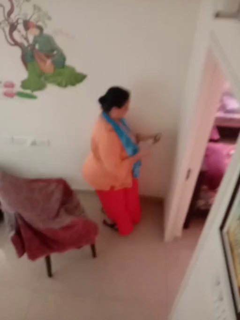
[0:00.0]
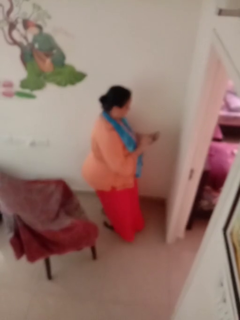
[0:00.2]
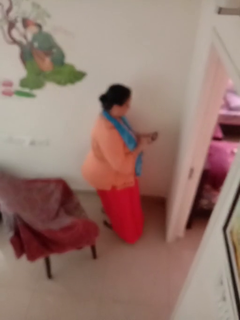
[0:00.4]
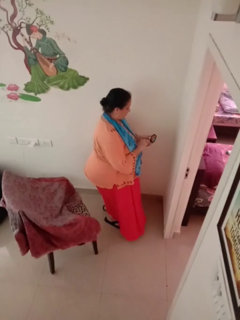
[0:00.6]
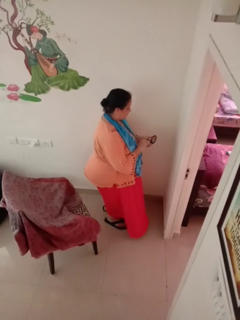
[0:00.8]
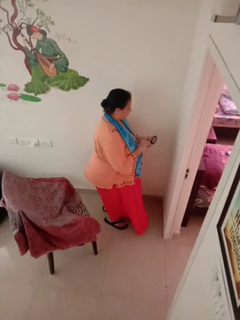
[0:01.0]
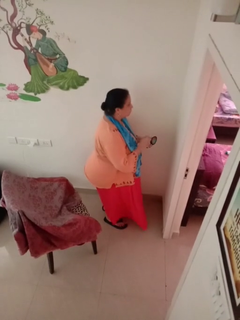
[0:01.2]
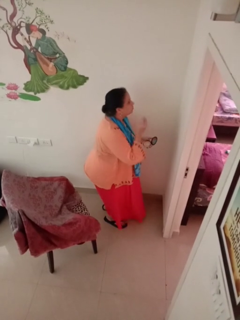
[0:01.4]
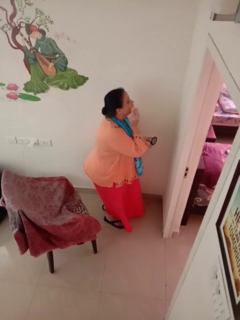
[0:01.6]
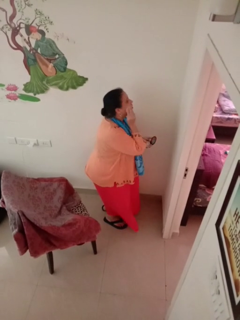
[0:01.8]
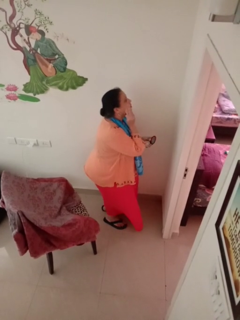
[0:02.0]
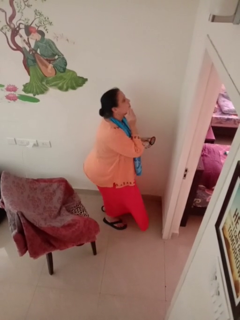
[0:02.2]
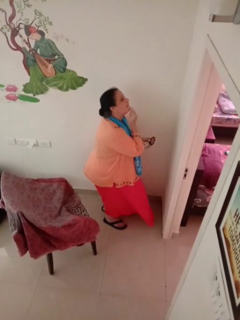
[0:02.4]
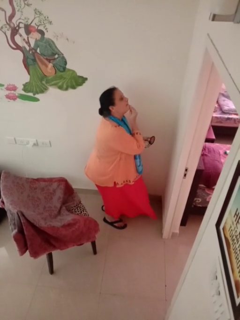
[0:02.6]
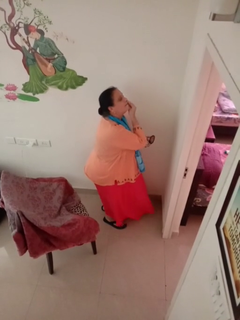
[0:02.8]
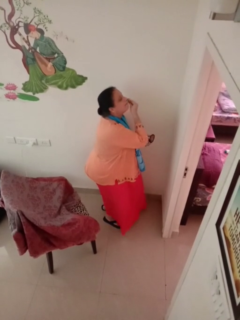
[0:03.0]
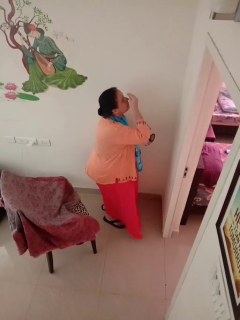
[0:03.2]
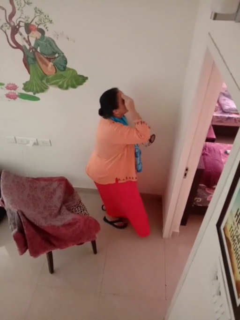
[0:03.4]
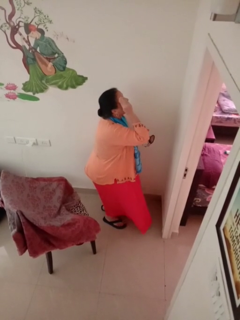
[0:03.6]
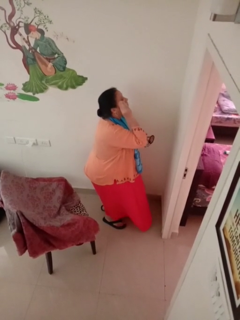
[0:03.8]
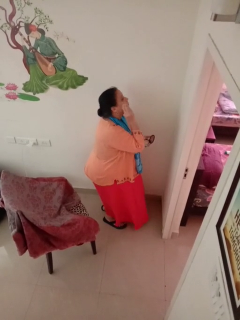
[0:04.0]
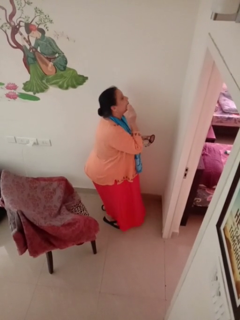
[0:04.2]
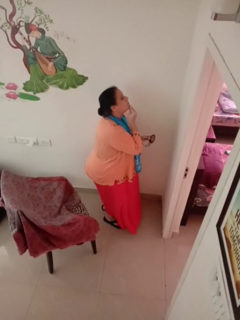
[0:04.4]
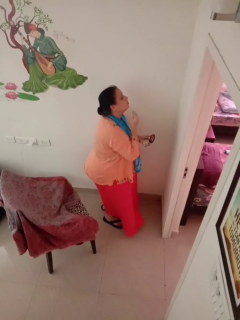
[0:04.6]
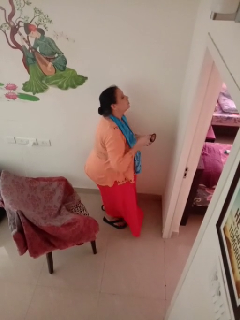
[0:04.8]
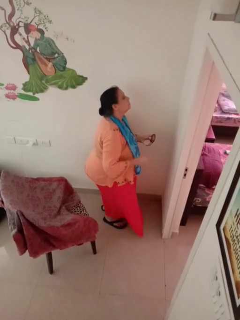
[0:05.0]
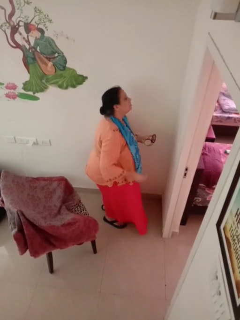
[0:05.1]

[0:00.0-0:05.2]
person applies foundation makeup

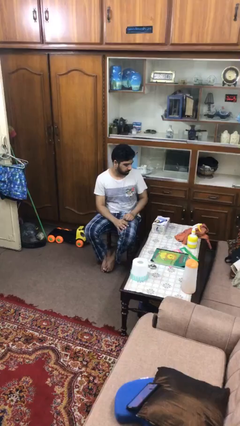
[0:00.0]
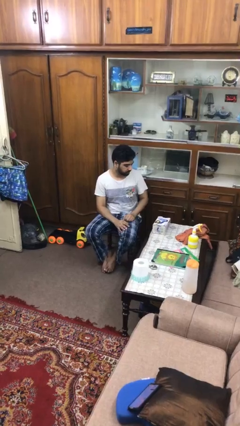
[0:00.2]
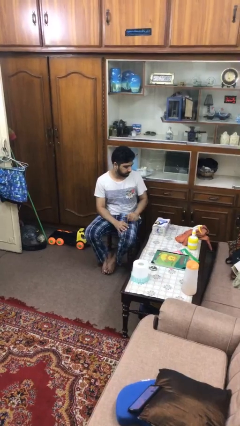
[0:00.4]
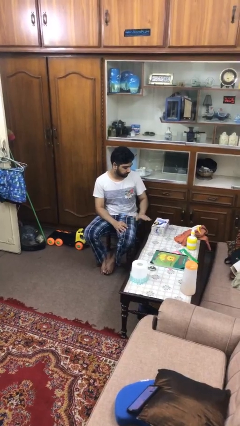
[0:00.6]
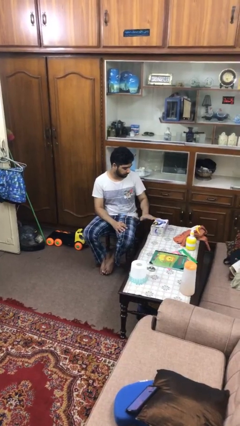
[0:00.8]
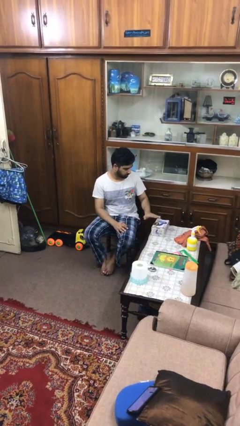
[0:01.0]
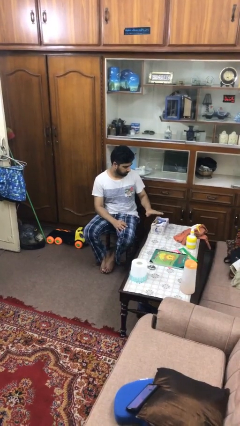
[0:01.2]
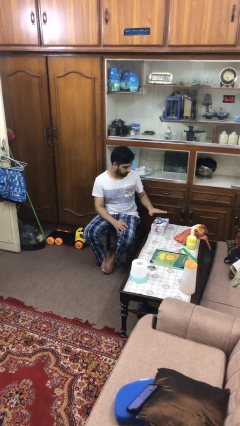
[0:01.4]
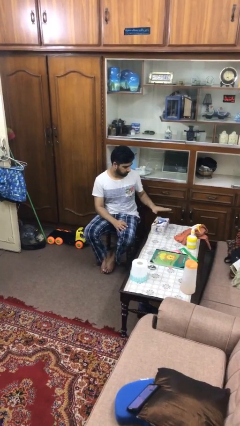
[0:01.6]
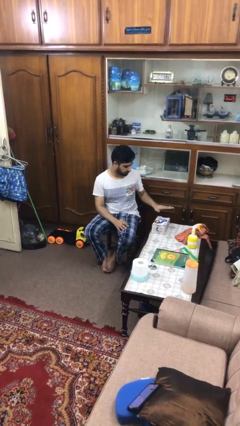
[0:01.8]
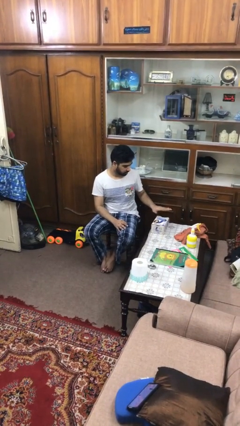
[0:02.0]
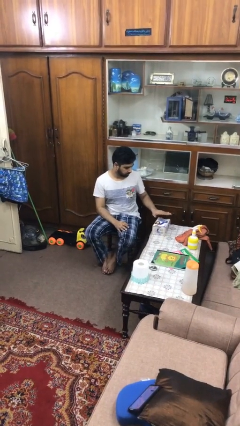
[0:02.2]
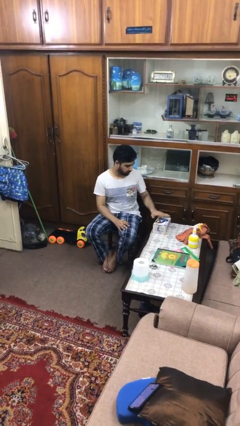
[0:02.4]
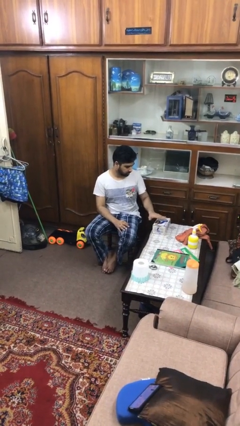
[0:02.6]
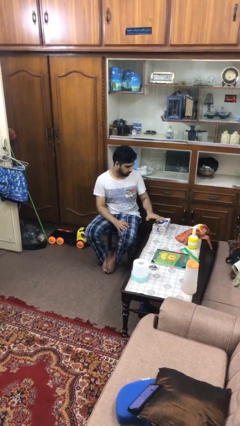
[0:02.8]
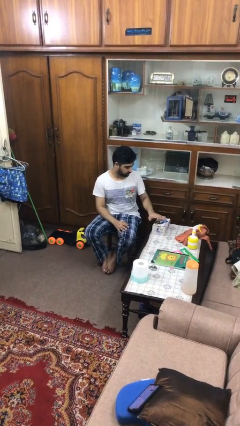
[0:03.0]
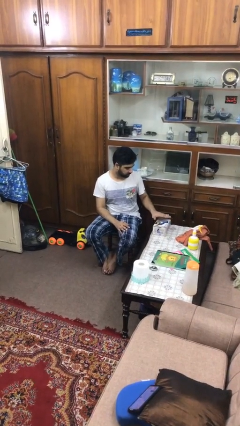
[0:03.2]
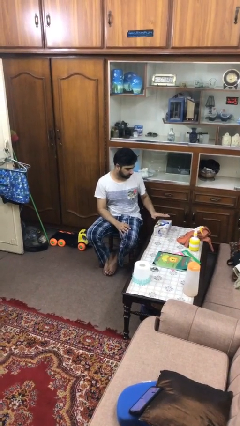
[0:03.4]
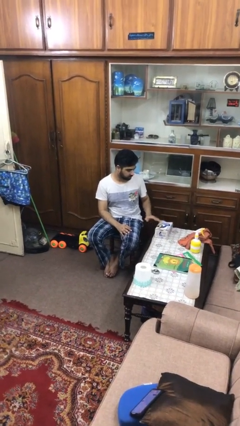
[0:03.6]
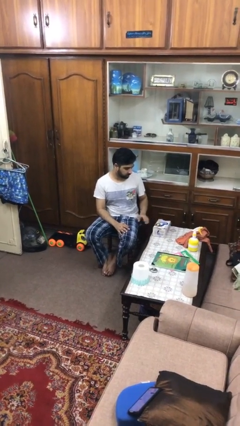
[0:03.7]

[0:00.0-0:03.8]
person waves hand over object

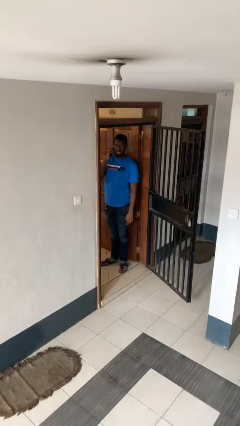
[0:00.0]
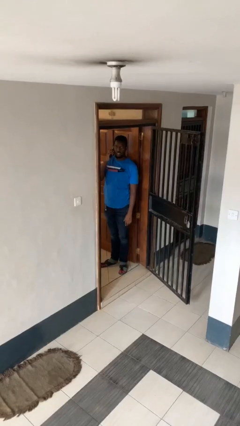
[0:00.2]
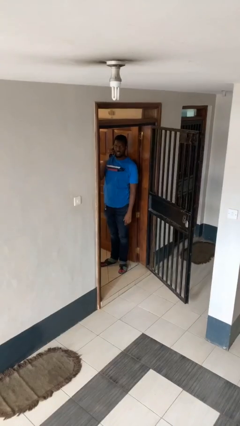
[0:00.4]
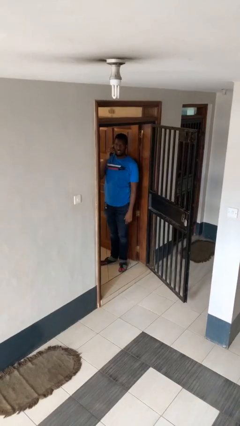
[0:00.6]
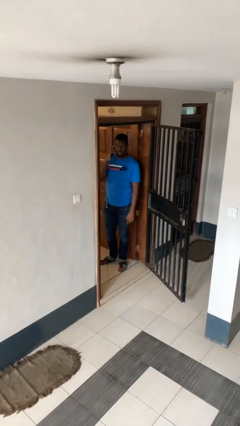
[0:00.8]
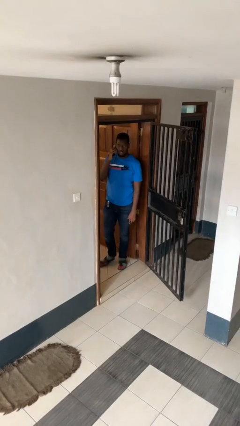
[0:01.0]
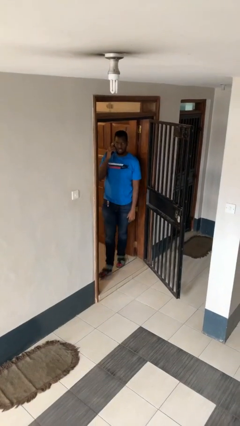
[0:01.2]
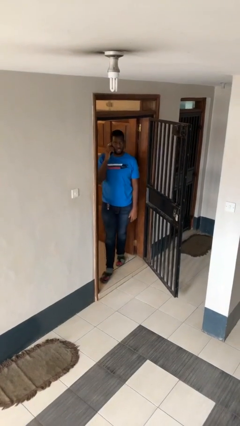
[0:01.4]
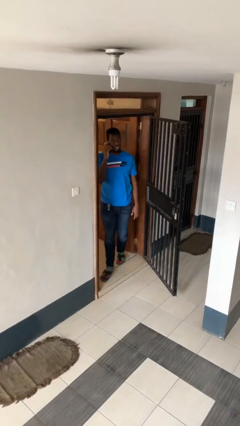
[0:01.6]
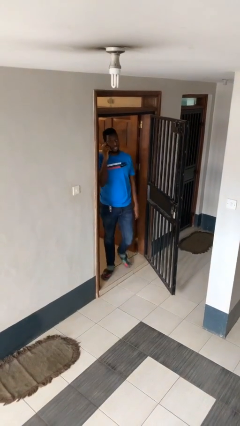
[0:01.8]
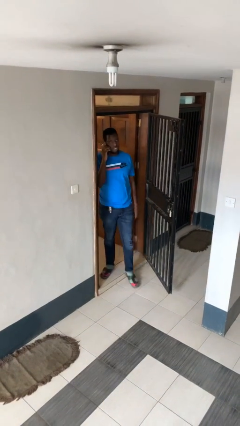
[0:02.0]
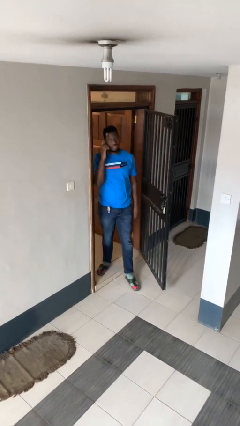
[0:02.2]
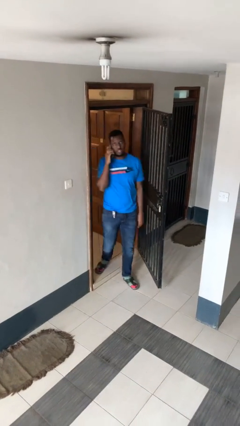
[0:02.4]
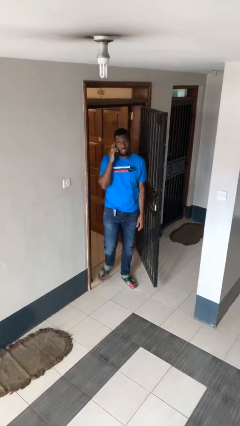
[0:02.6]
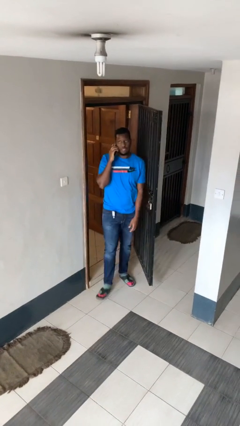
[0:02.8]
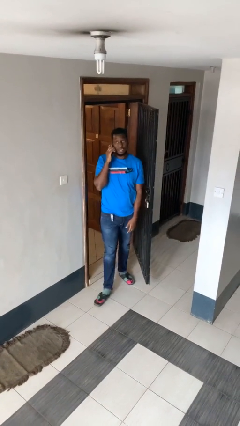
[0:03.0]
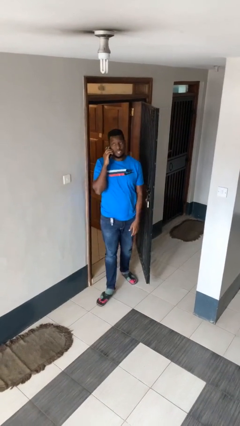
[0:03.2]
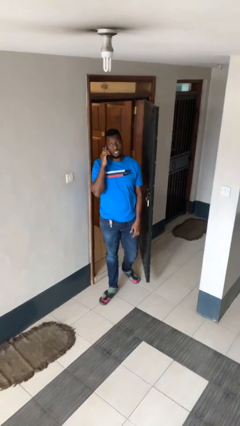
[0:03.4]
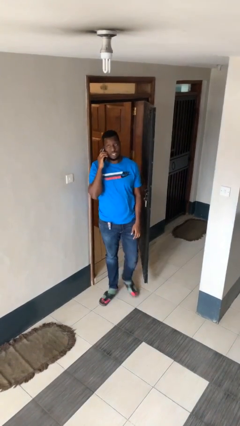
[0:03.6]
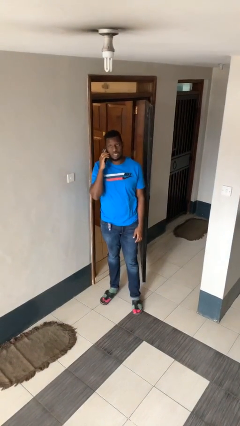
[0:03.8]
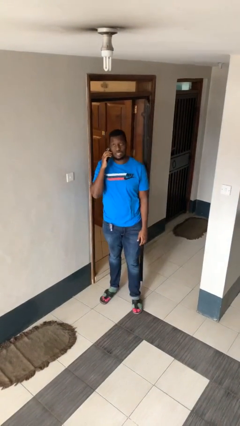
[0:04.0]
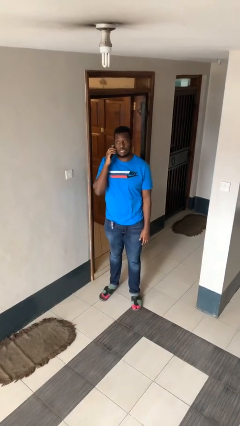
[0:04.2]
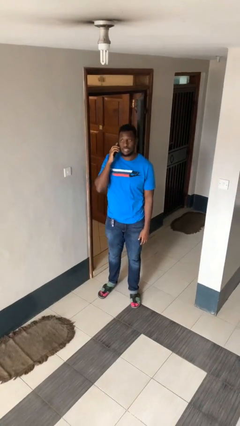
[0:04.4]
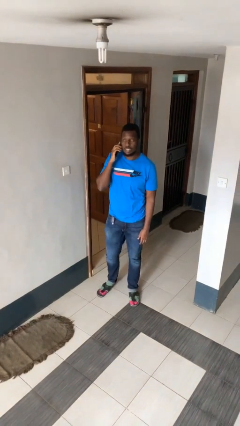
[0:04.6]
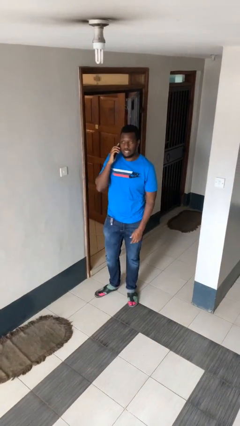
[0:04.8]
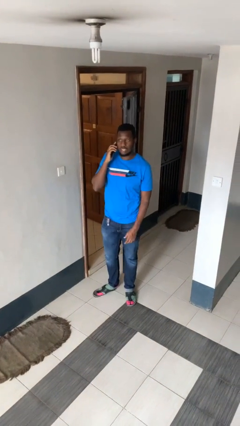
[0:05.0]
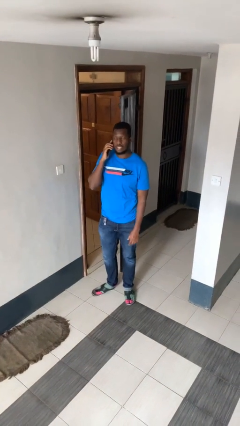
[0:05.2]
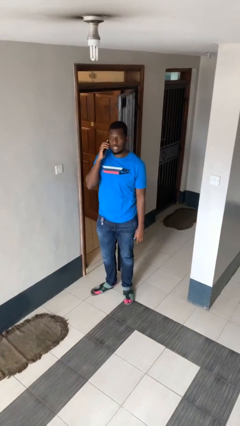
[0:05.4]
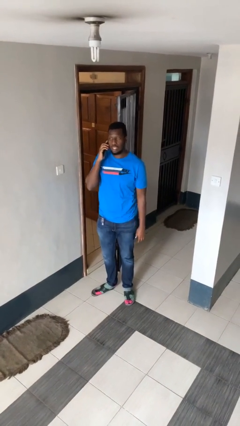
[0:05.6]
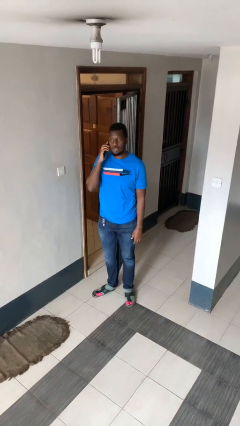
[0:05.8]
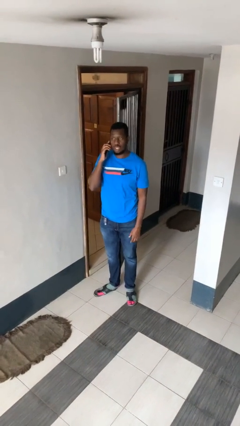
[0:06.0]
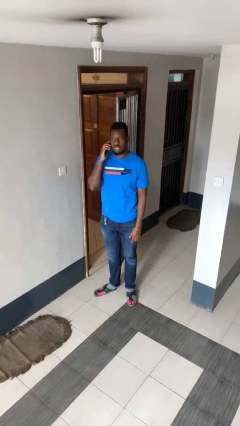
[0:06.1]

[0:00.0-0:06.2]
person enters scene through structure

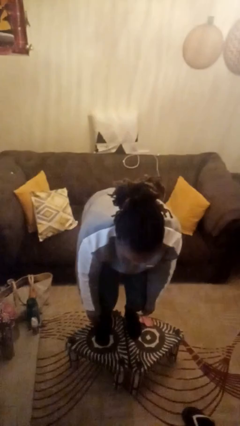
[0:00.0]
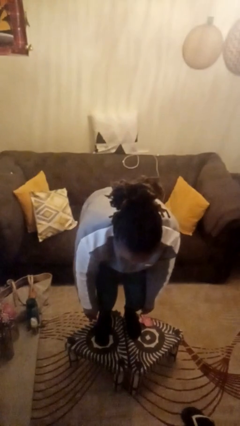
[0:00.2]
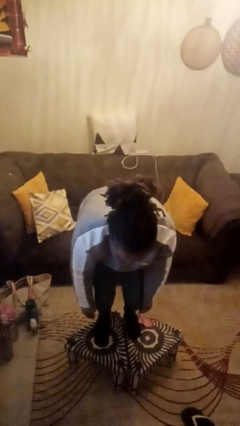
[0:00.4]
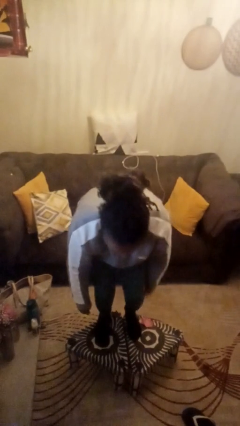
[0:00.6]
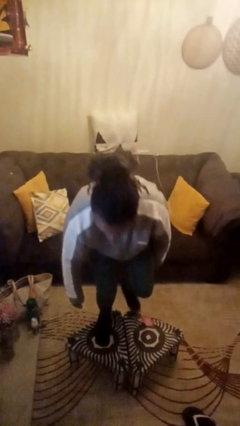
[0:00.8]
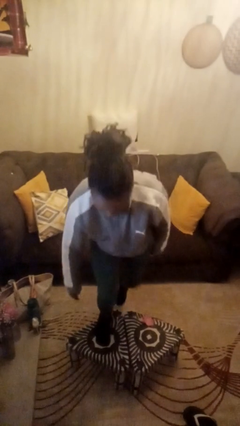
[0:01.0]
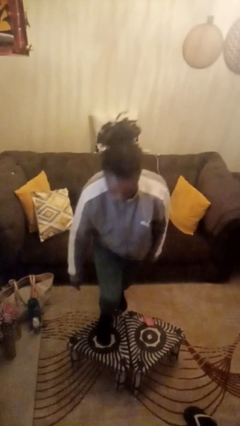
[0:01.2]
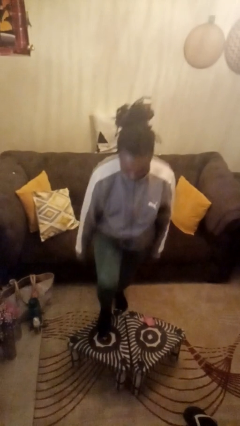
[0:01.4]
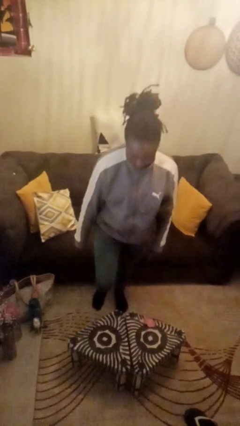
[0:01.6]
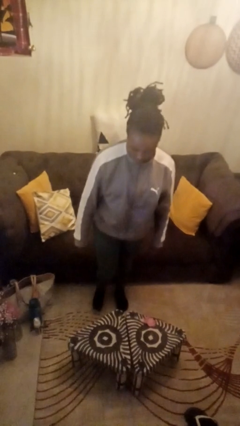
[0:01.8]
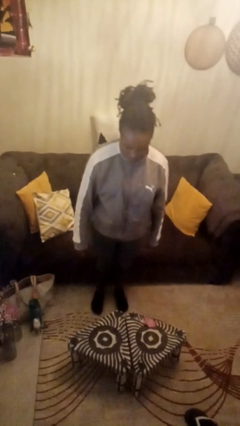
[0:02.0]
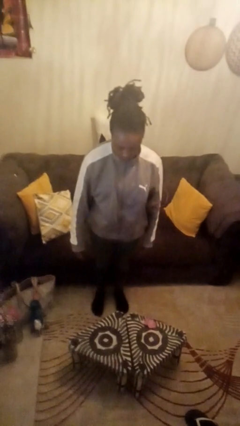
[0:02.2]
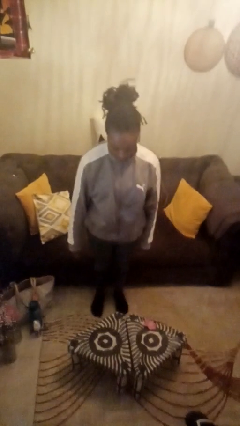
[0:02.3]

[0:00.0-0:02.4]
person climbs off table

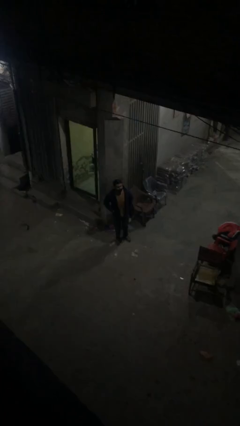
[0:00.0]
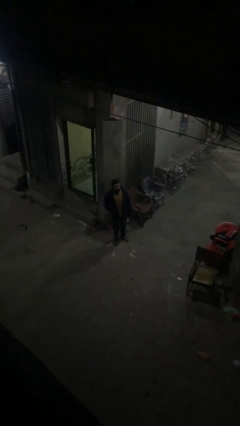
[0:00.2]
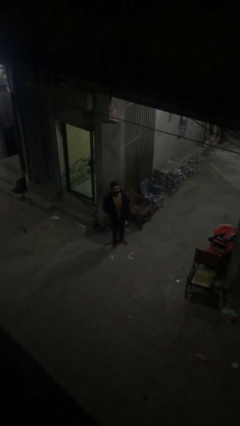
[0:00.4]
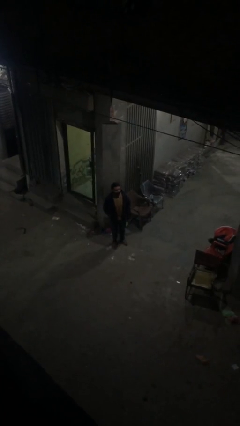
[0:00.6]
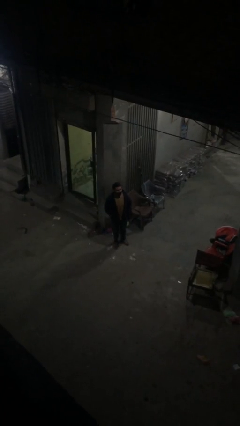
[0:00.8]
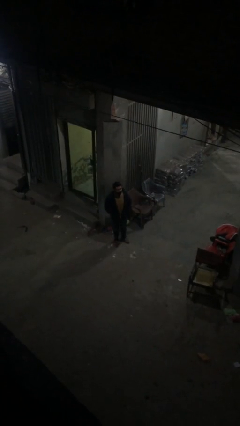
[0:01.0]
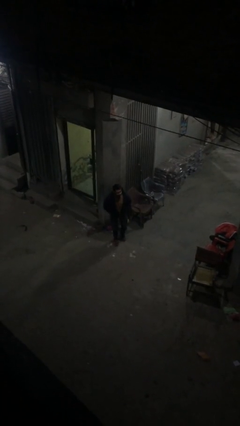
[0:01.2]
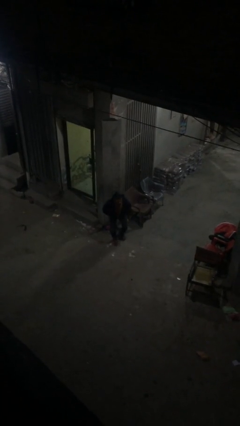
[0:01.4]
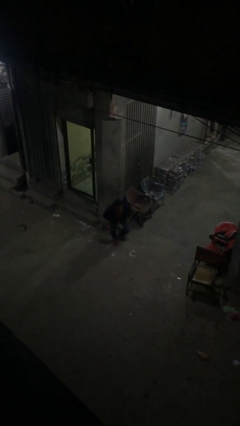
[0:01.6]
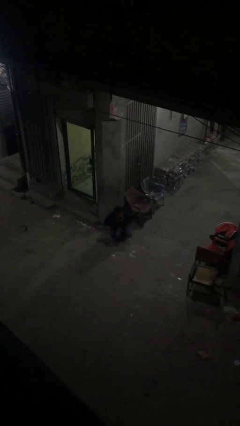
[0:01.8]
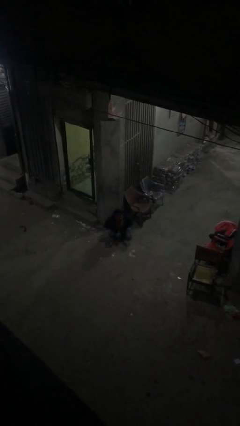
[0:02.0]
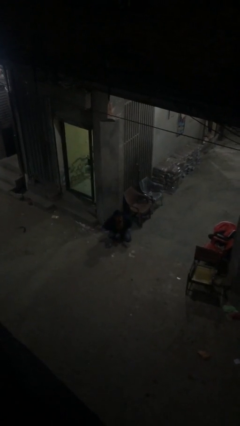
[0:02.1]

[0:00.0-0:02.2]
person sits down
